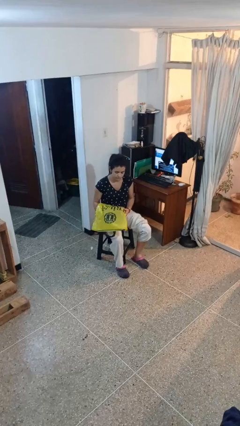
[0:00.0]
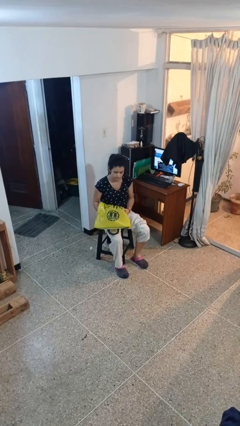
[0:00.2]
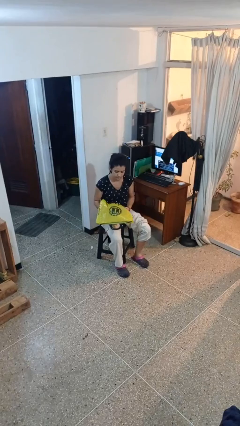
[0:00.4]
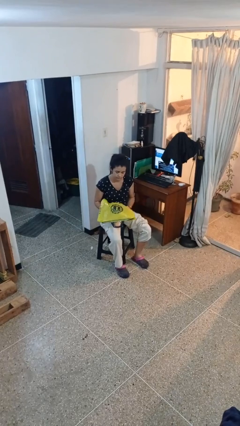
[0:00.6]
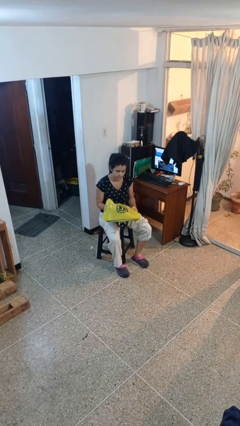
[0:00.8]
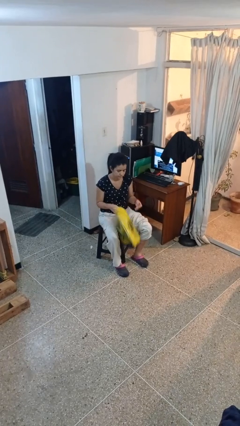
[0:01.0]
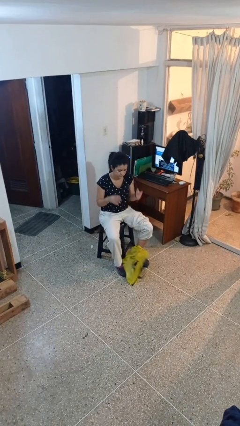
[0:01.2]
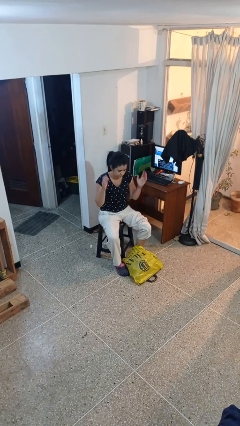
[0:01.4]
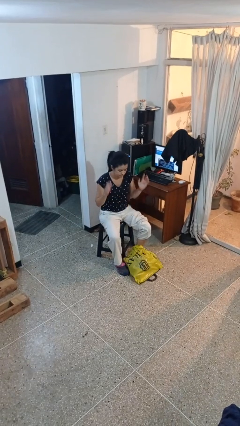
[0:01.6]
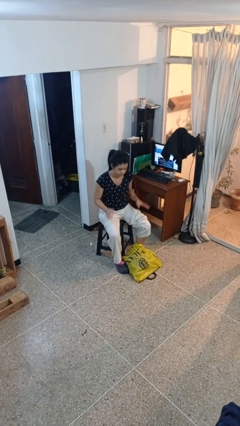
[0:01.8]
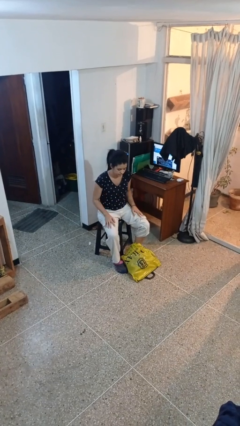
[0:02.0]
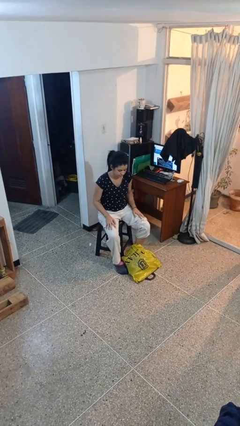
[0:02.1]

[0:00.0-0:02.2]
person drops object

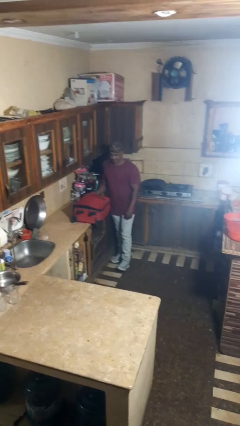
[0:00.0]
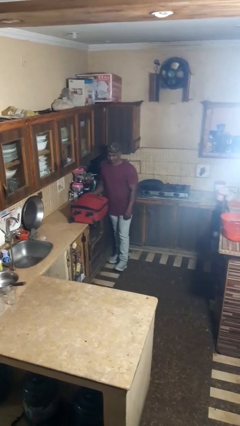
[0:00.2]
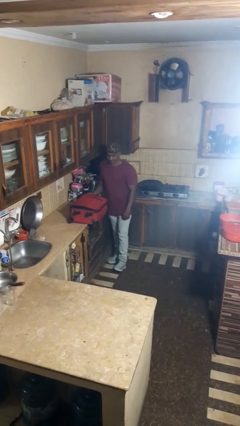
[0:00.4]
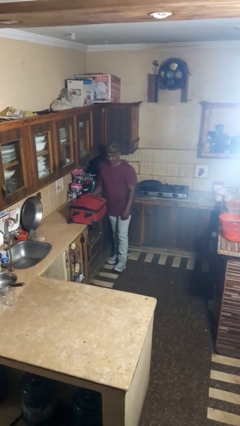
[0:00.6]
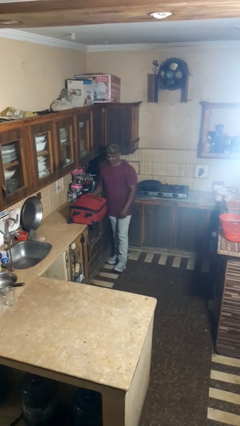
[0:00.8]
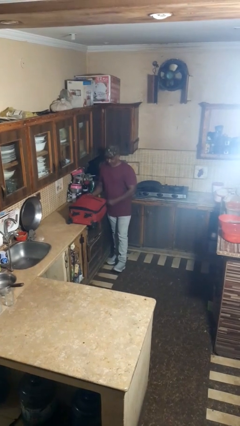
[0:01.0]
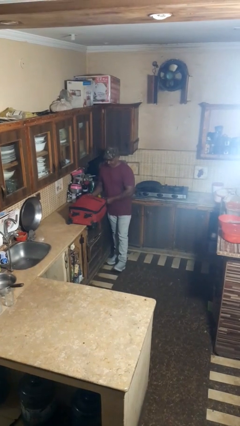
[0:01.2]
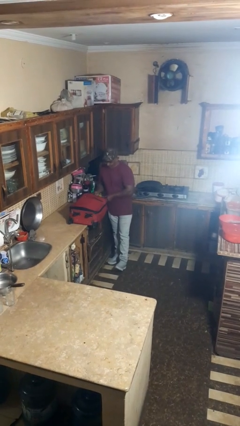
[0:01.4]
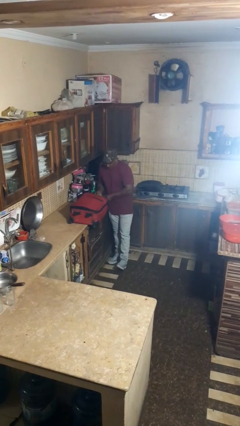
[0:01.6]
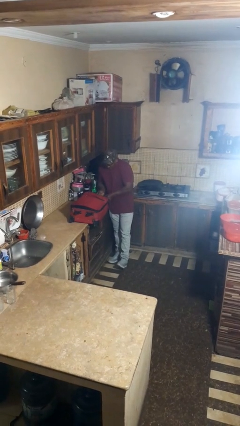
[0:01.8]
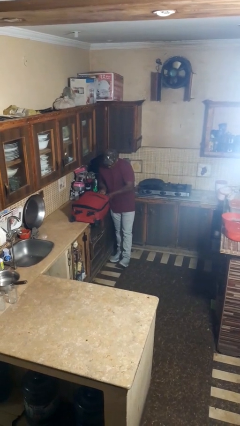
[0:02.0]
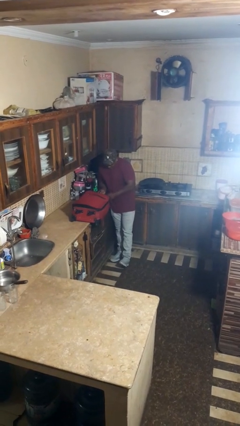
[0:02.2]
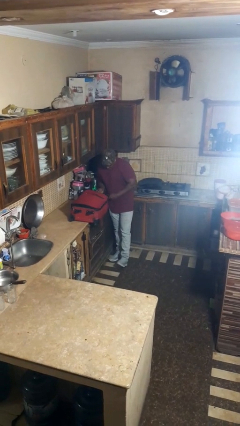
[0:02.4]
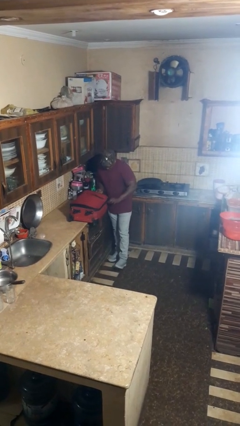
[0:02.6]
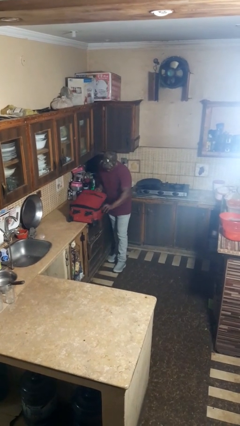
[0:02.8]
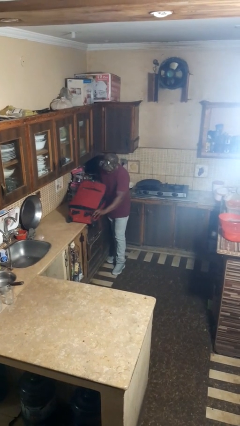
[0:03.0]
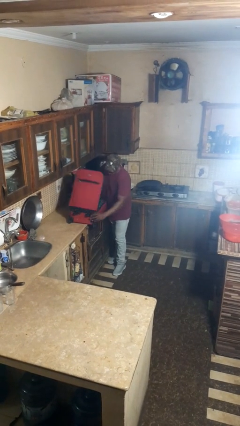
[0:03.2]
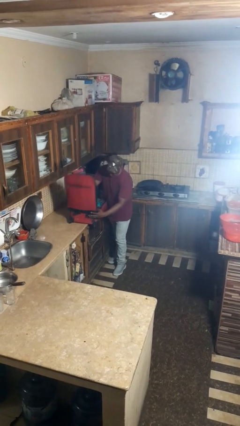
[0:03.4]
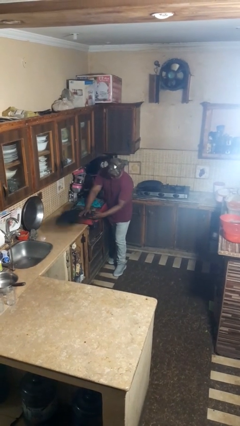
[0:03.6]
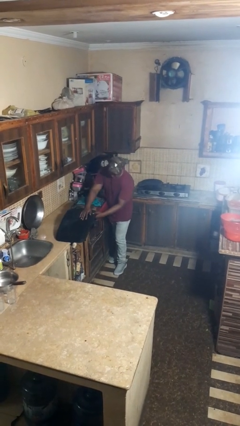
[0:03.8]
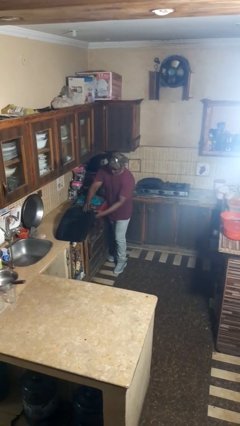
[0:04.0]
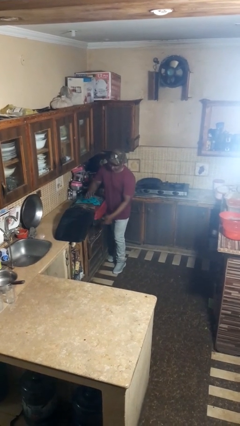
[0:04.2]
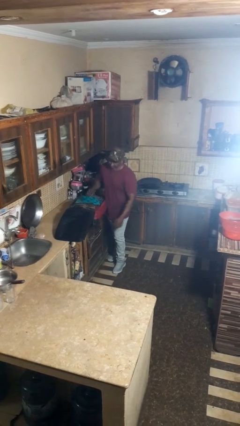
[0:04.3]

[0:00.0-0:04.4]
person opens suitcase

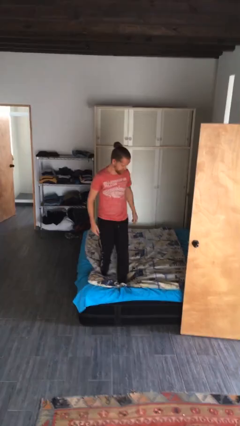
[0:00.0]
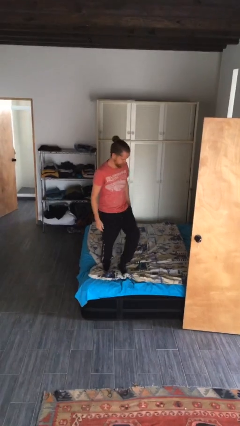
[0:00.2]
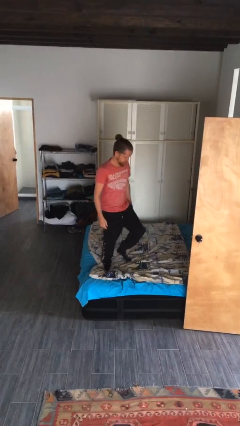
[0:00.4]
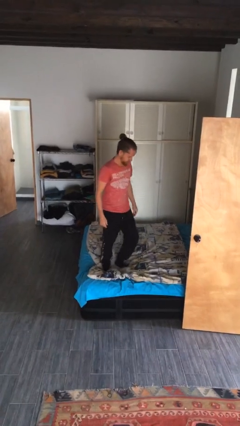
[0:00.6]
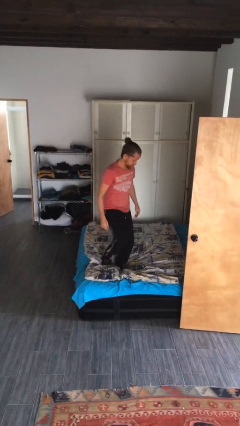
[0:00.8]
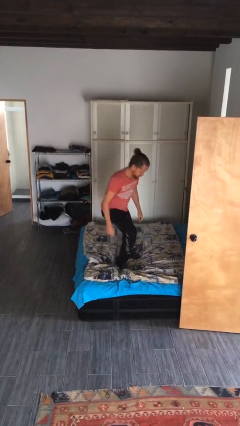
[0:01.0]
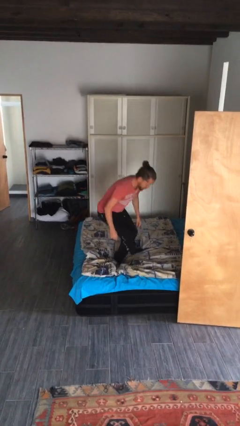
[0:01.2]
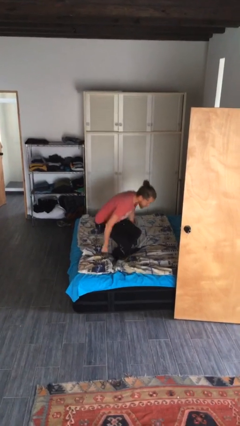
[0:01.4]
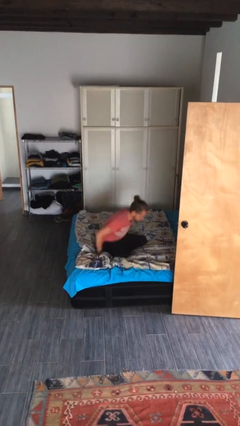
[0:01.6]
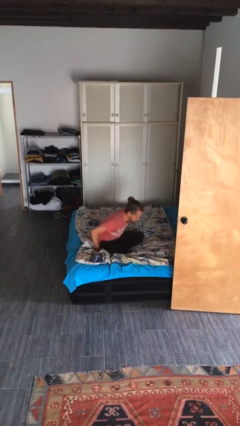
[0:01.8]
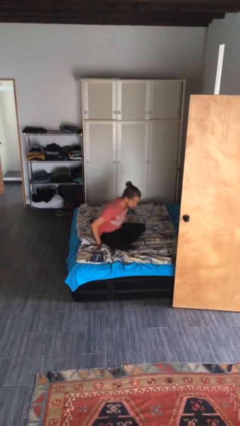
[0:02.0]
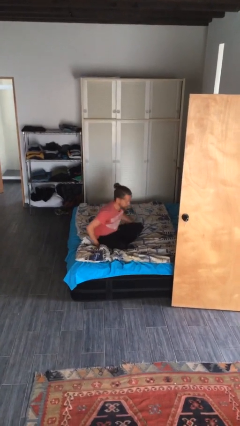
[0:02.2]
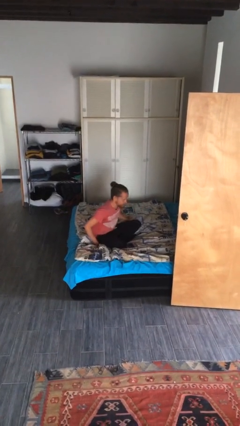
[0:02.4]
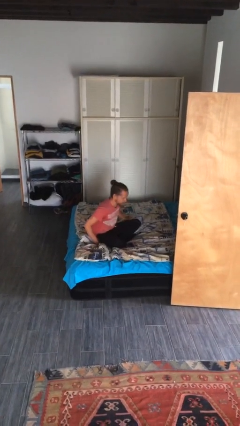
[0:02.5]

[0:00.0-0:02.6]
person sits crisscross

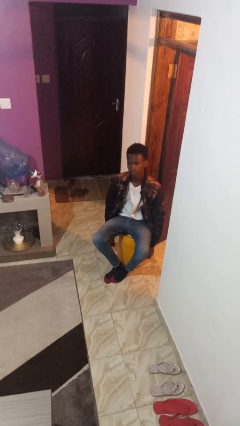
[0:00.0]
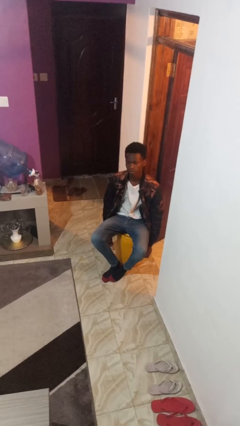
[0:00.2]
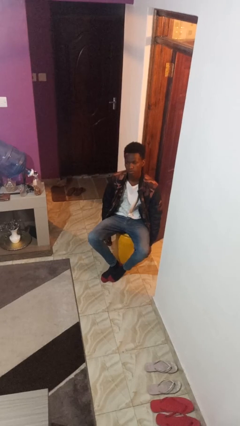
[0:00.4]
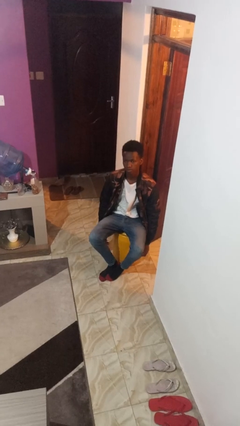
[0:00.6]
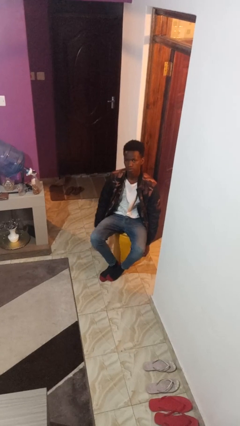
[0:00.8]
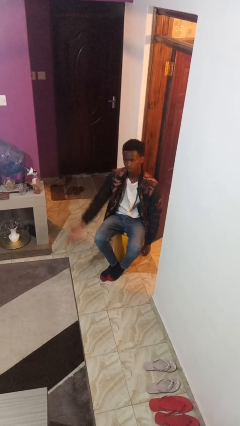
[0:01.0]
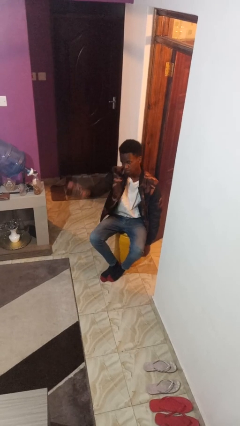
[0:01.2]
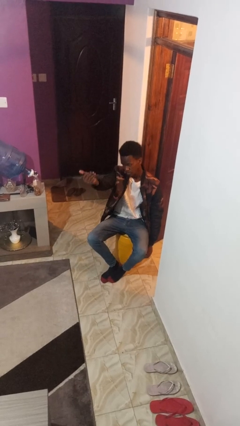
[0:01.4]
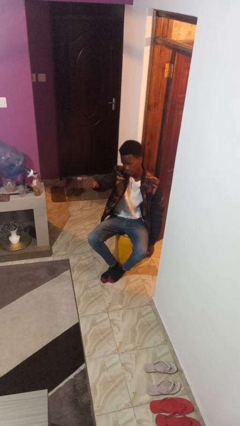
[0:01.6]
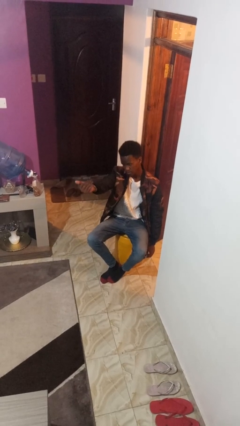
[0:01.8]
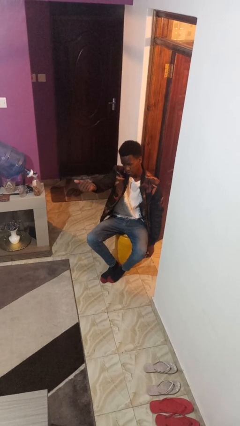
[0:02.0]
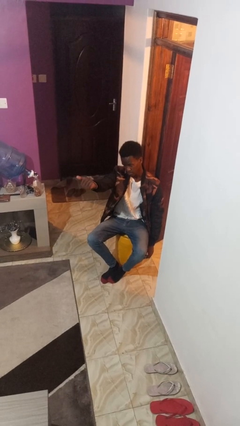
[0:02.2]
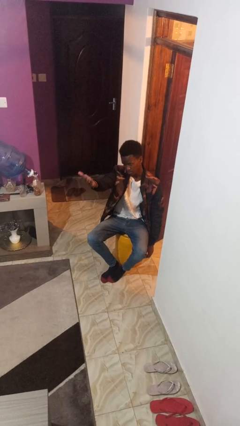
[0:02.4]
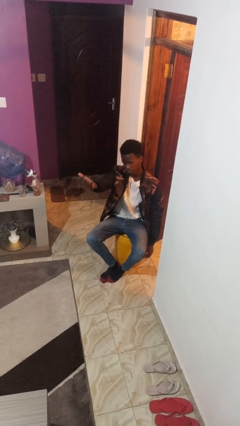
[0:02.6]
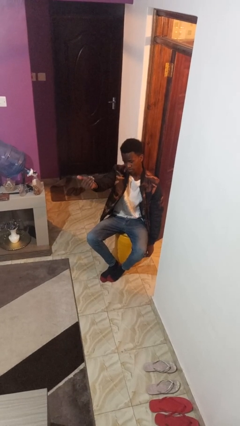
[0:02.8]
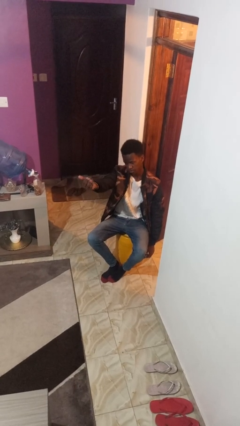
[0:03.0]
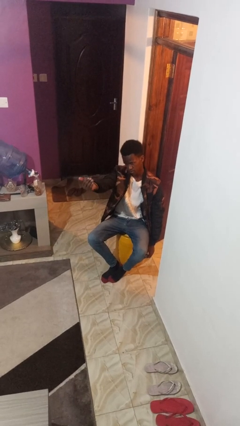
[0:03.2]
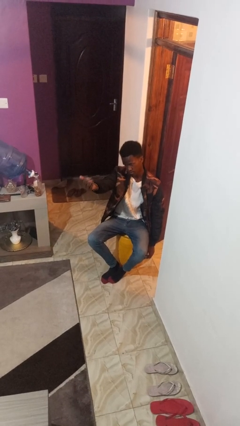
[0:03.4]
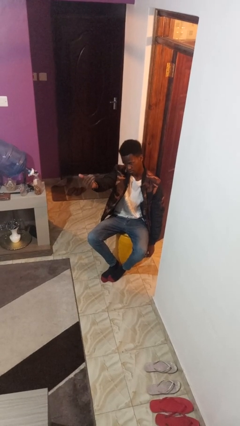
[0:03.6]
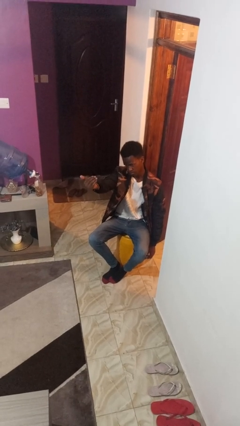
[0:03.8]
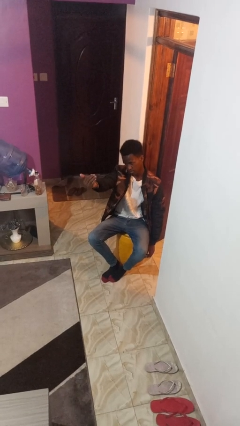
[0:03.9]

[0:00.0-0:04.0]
person gestures come here

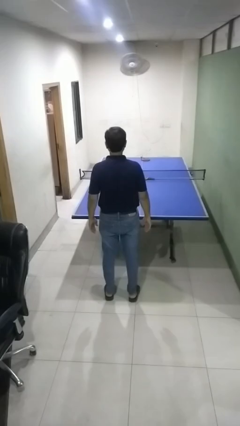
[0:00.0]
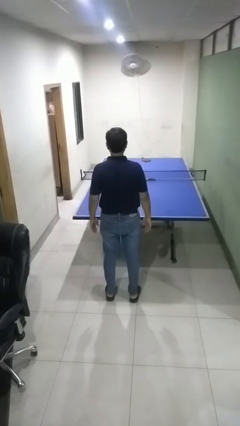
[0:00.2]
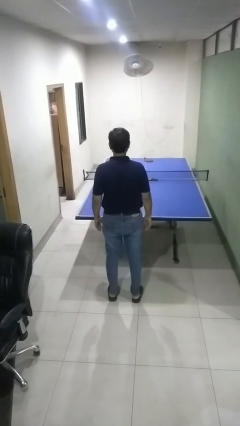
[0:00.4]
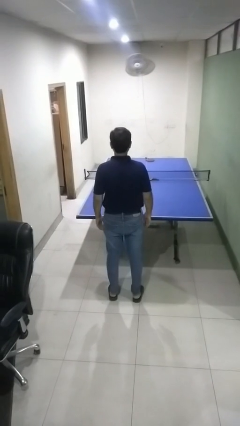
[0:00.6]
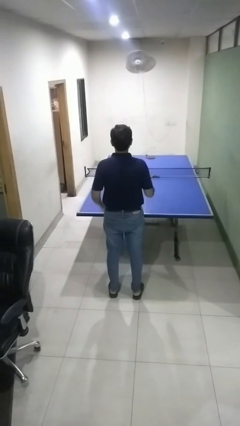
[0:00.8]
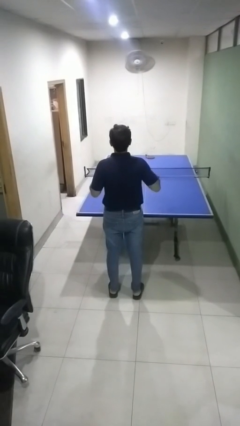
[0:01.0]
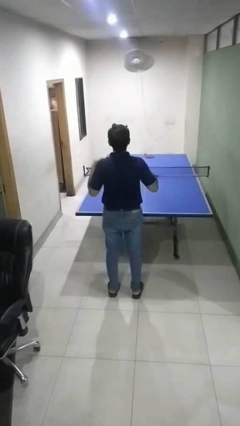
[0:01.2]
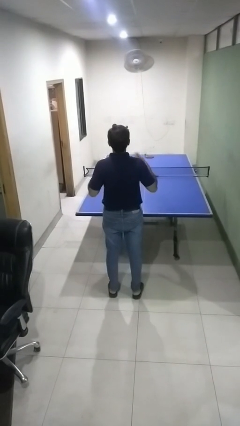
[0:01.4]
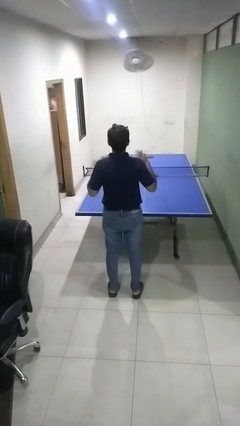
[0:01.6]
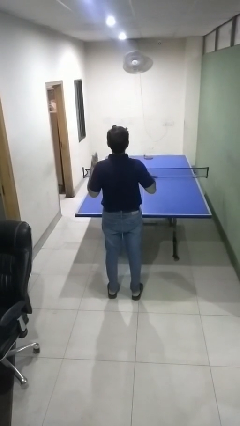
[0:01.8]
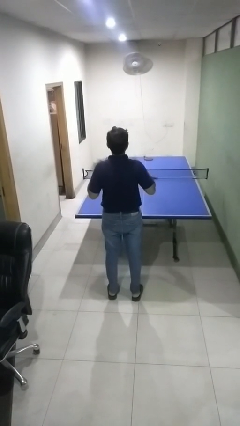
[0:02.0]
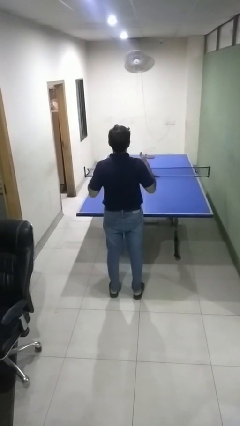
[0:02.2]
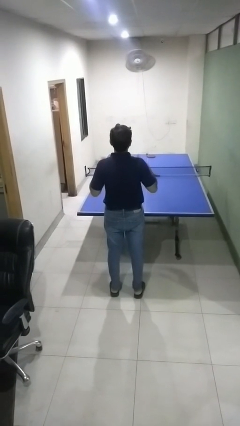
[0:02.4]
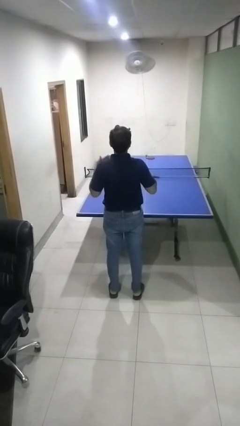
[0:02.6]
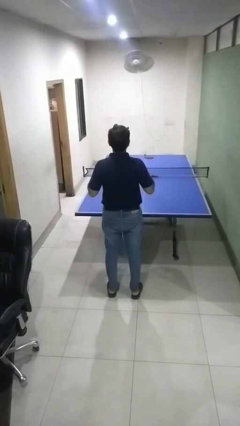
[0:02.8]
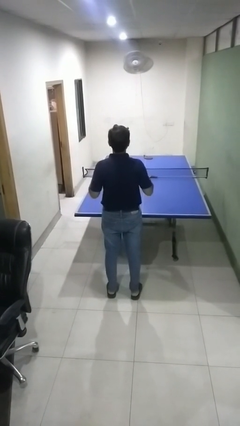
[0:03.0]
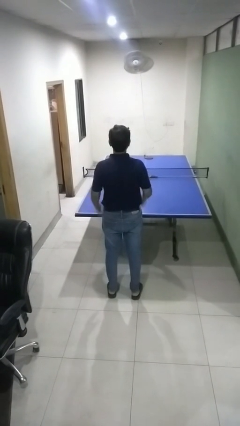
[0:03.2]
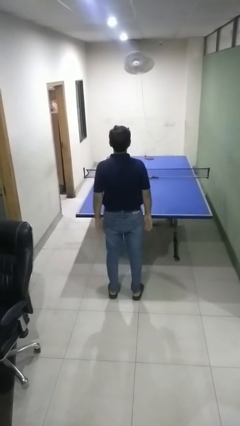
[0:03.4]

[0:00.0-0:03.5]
person drums on chest

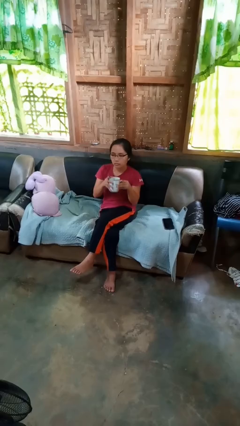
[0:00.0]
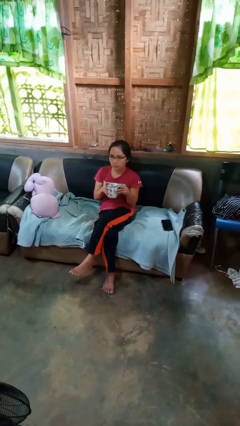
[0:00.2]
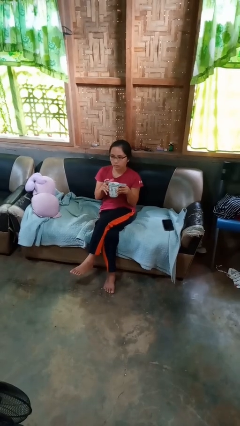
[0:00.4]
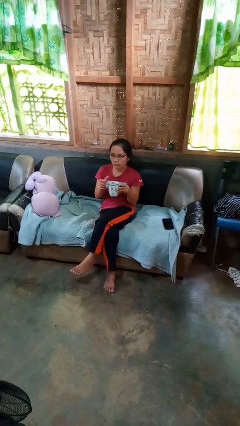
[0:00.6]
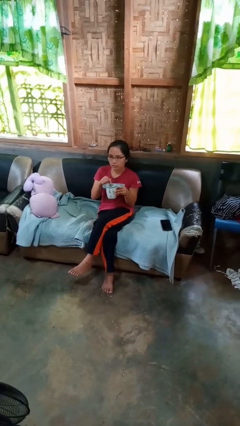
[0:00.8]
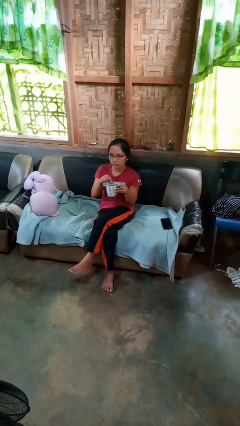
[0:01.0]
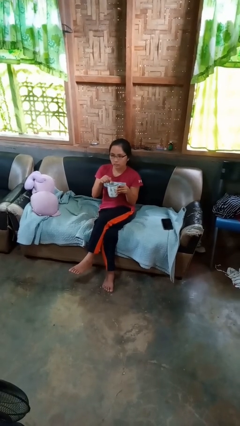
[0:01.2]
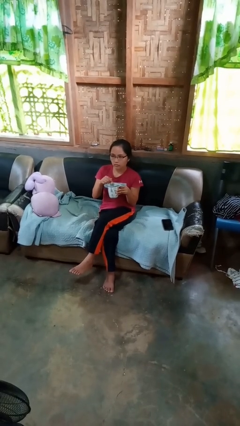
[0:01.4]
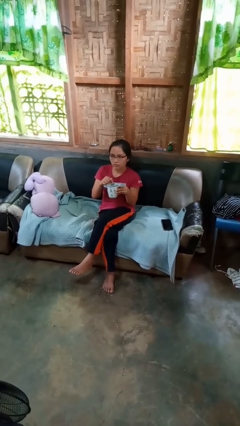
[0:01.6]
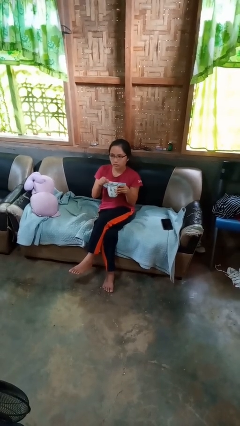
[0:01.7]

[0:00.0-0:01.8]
person stirs mug
